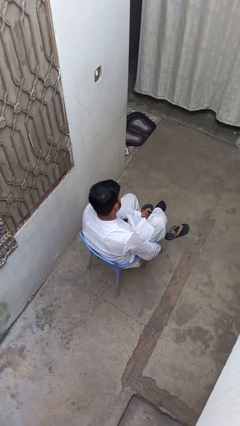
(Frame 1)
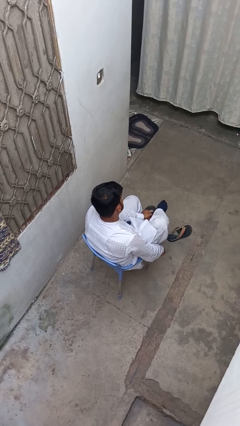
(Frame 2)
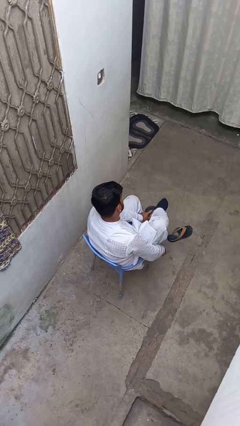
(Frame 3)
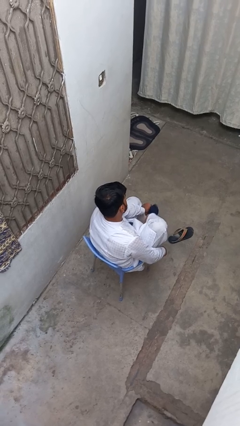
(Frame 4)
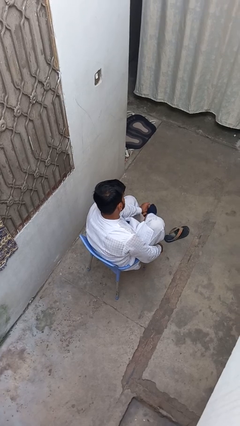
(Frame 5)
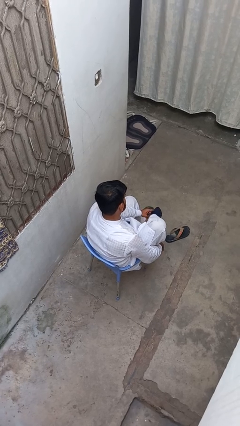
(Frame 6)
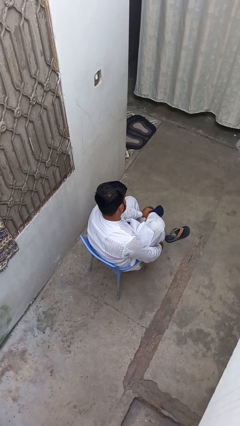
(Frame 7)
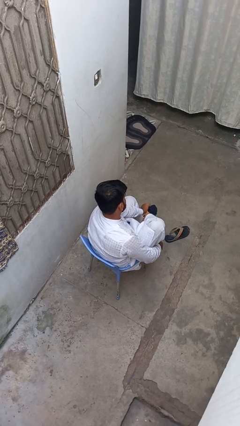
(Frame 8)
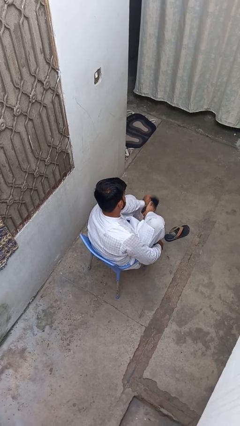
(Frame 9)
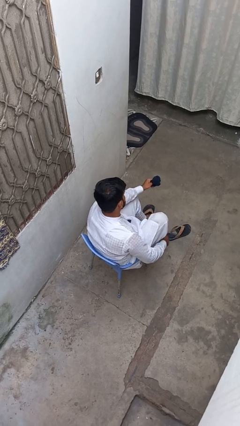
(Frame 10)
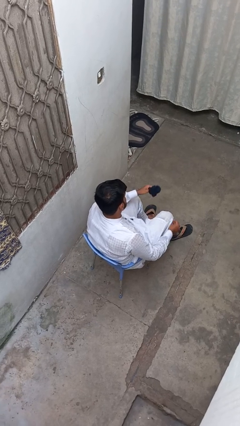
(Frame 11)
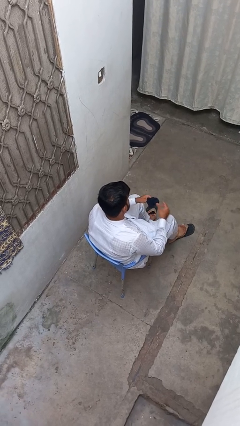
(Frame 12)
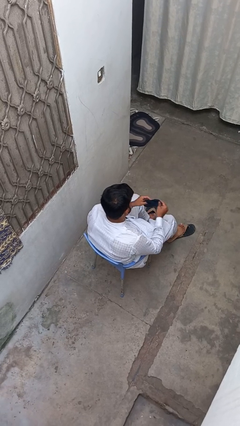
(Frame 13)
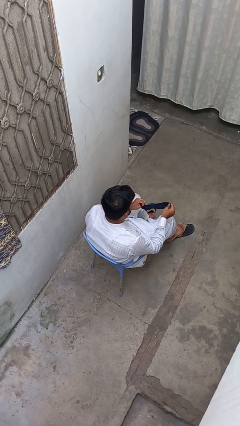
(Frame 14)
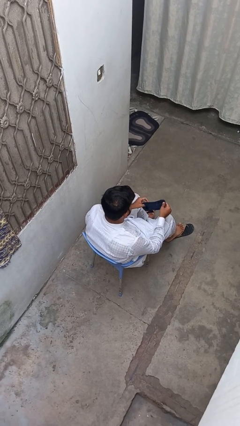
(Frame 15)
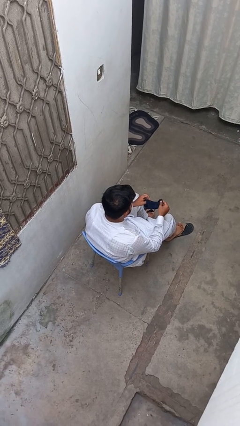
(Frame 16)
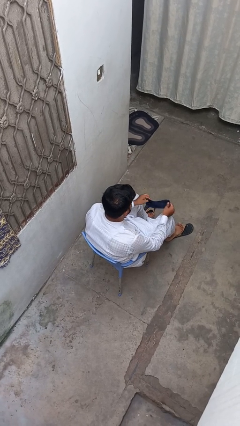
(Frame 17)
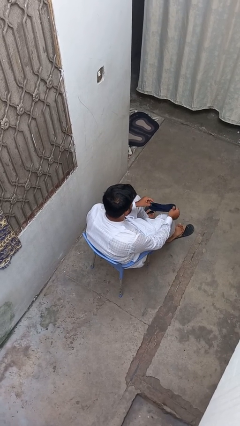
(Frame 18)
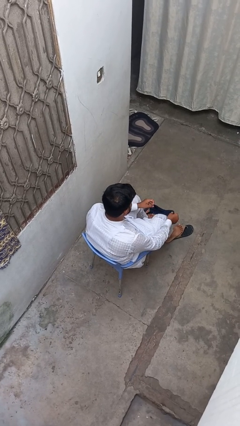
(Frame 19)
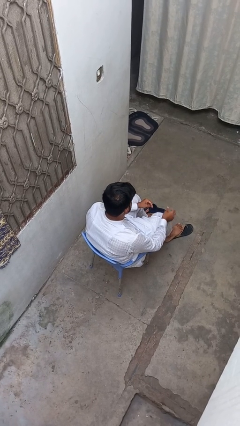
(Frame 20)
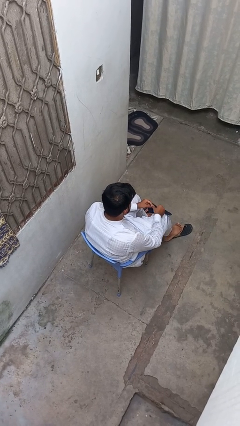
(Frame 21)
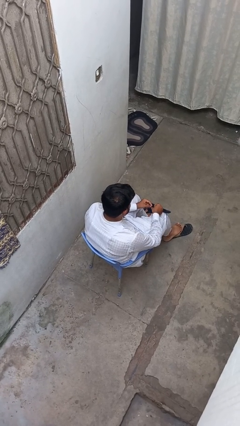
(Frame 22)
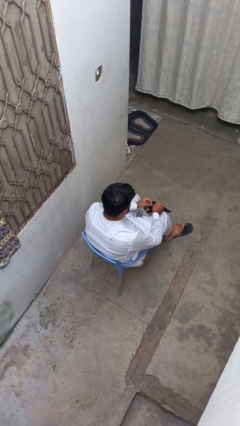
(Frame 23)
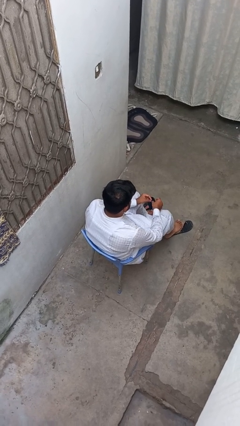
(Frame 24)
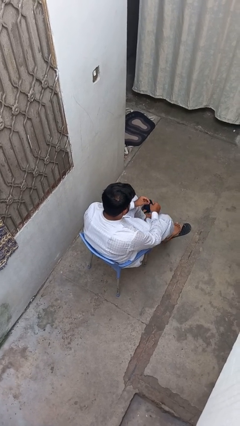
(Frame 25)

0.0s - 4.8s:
person takes off socks

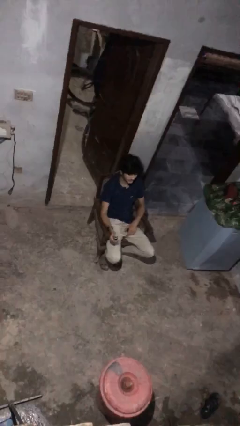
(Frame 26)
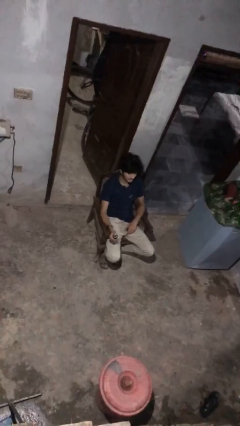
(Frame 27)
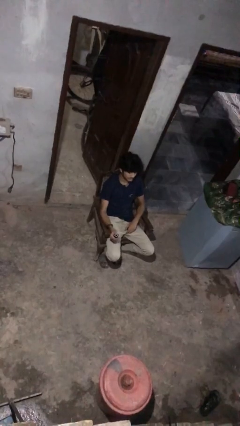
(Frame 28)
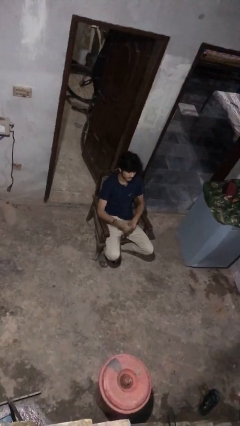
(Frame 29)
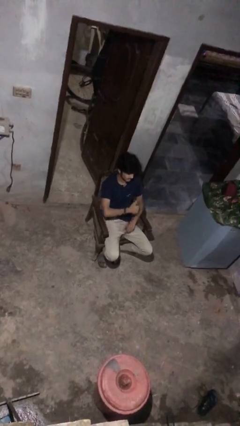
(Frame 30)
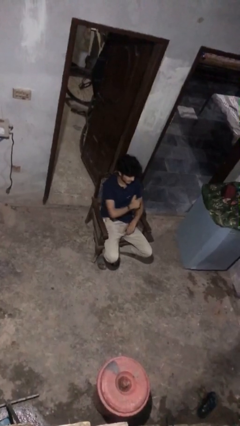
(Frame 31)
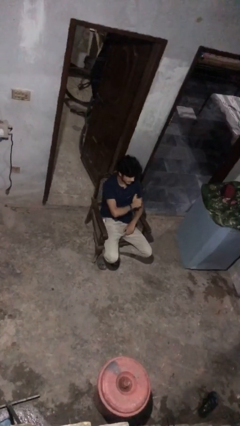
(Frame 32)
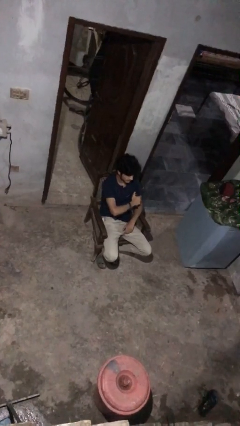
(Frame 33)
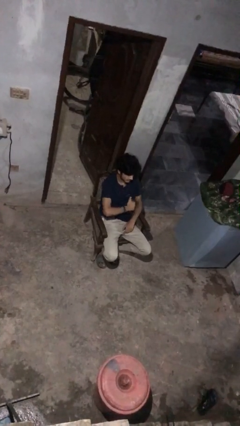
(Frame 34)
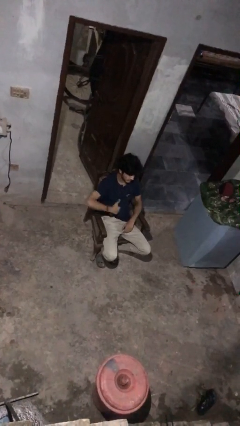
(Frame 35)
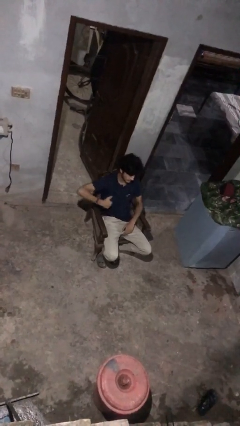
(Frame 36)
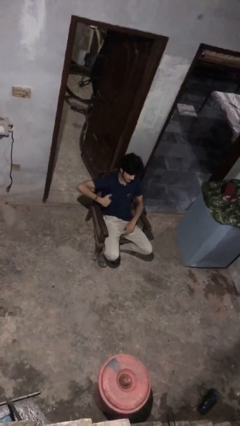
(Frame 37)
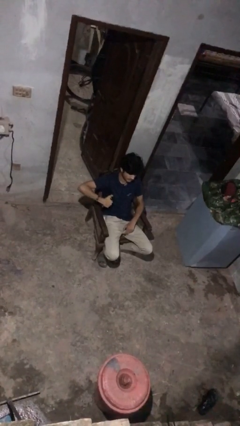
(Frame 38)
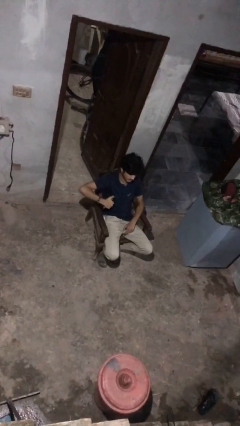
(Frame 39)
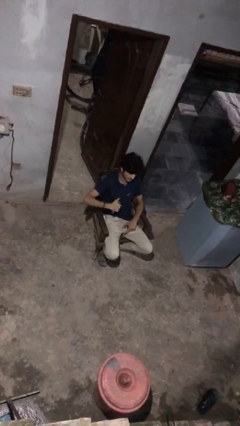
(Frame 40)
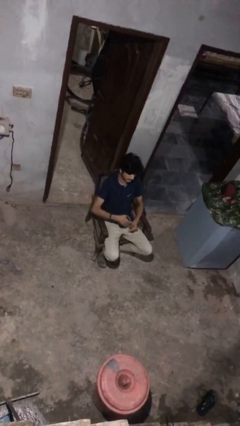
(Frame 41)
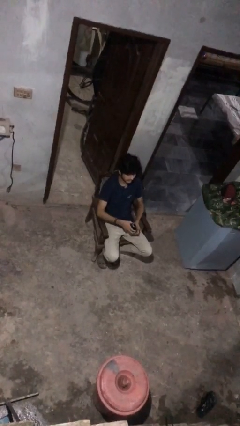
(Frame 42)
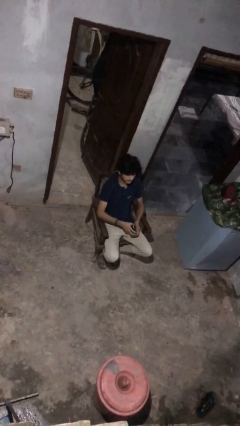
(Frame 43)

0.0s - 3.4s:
person applies deodorant

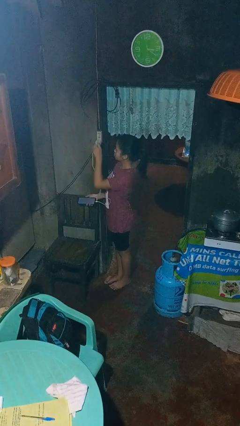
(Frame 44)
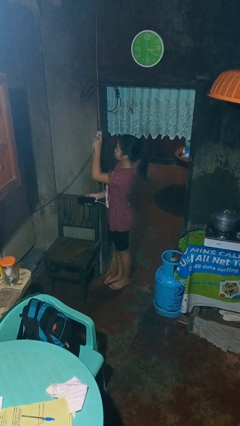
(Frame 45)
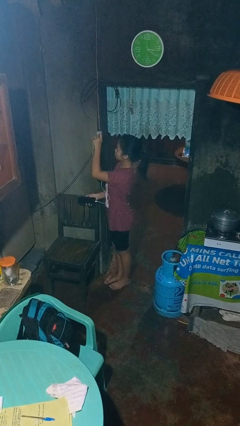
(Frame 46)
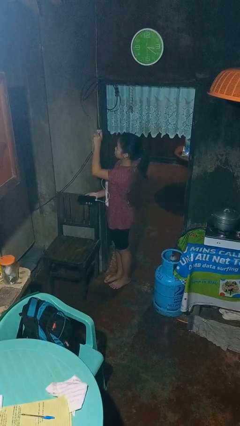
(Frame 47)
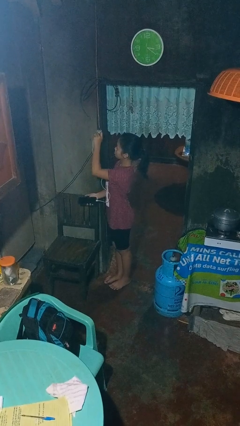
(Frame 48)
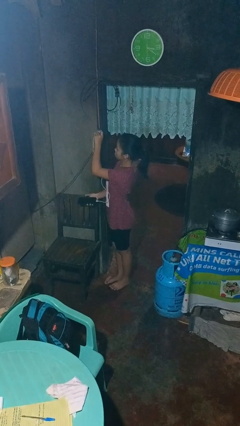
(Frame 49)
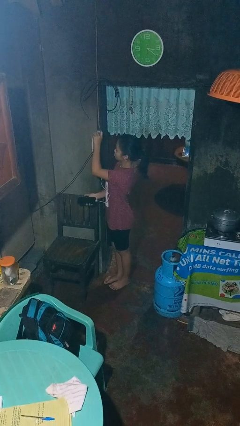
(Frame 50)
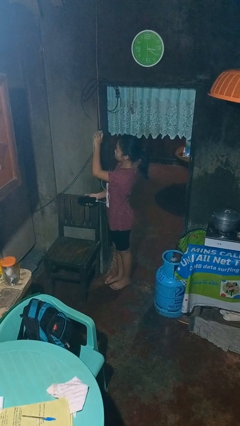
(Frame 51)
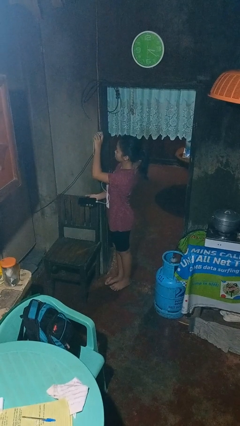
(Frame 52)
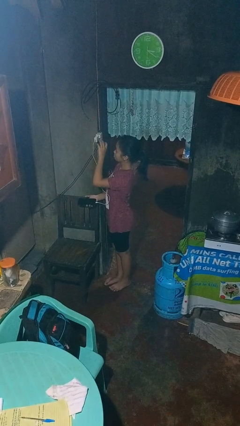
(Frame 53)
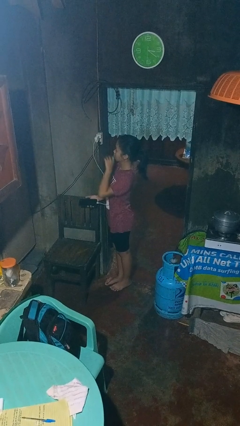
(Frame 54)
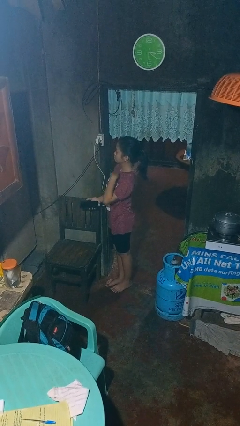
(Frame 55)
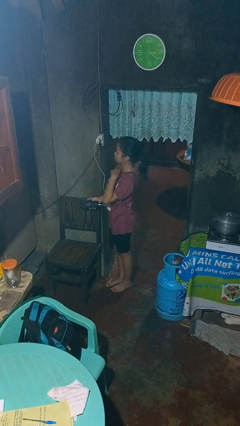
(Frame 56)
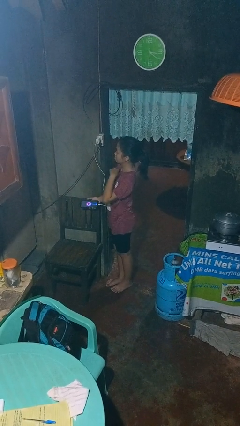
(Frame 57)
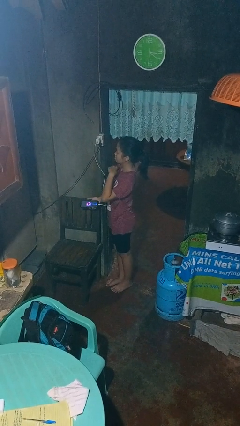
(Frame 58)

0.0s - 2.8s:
person plugs into electrical socket

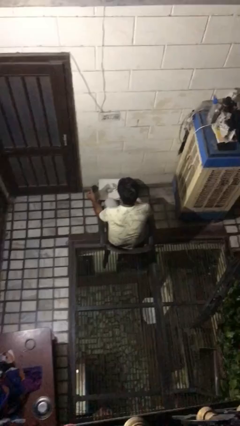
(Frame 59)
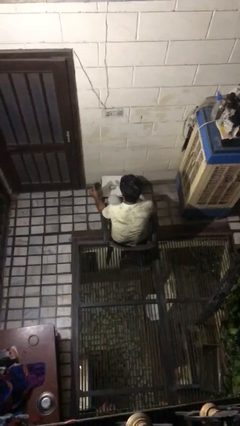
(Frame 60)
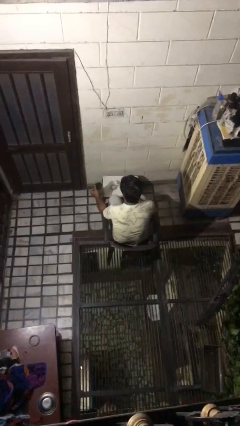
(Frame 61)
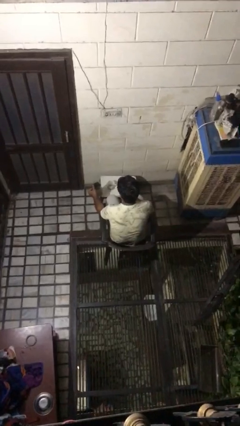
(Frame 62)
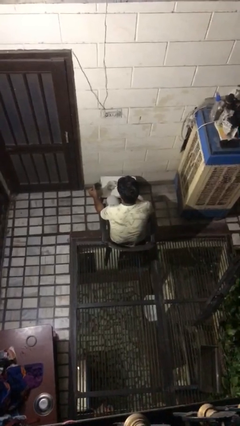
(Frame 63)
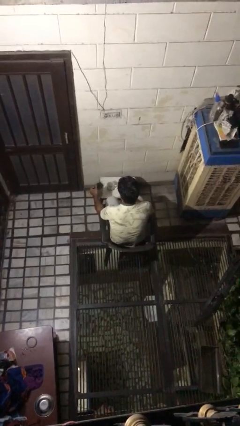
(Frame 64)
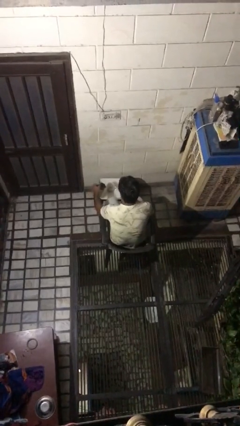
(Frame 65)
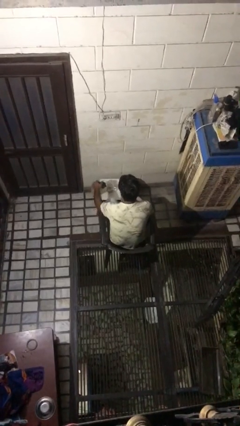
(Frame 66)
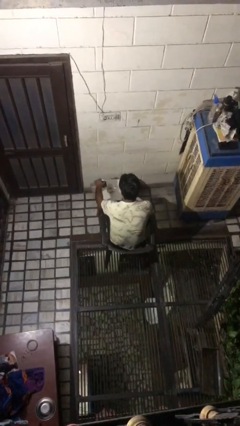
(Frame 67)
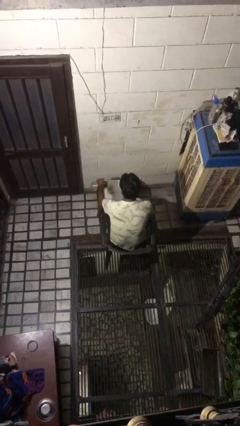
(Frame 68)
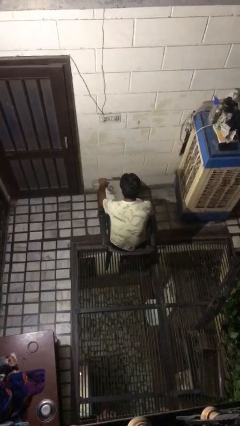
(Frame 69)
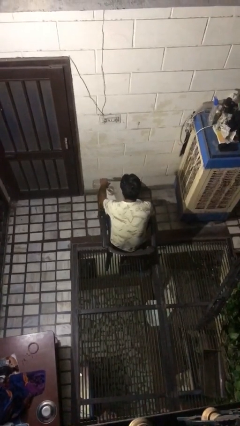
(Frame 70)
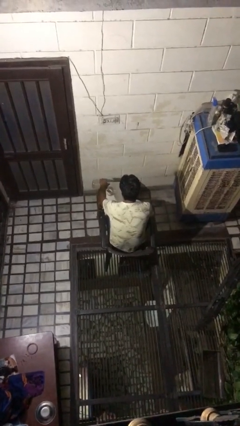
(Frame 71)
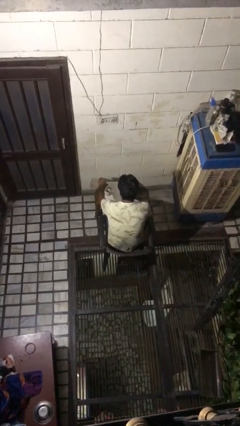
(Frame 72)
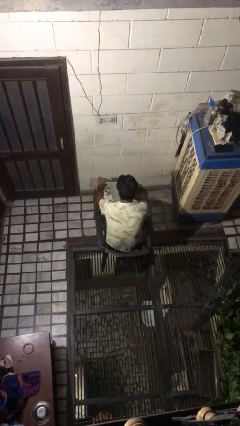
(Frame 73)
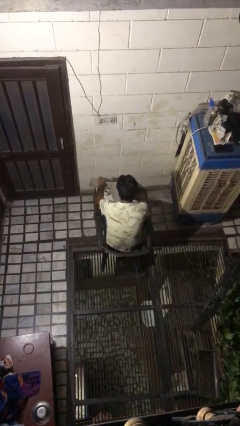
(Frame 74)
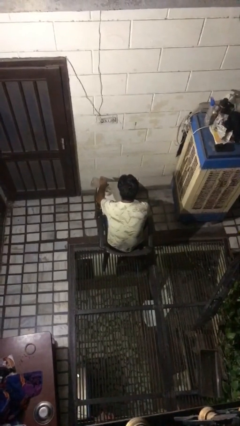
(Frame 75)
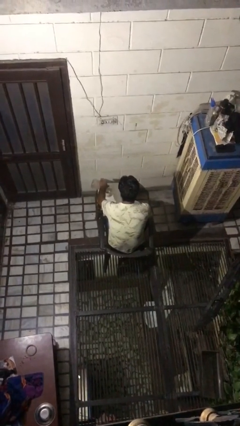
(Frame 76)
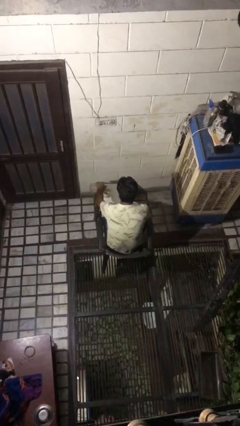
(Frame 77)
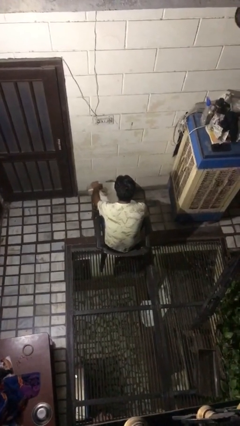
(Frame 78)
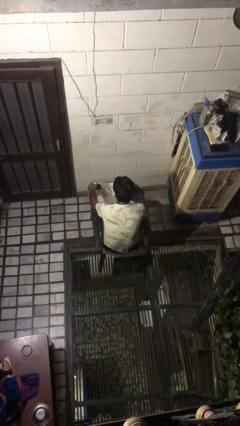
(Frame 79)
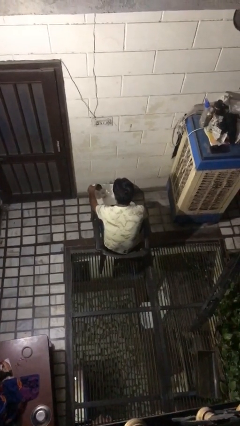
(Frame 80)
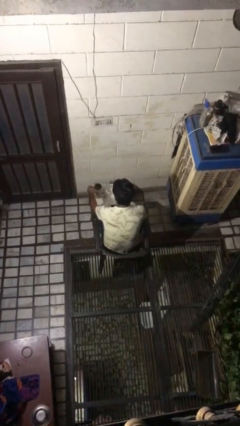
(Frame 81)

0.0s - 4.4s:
person pours coffee into mug

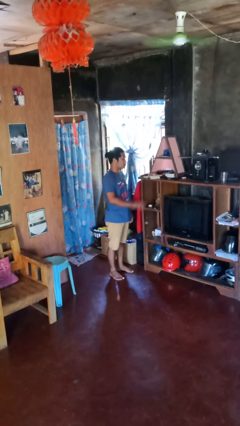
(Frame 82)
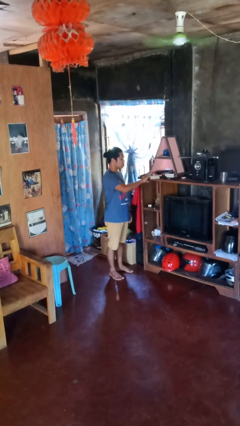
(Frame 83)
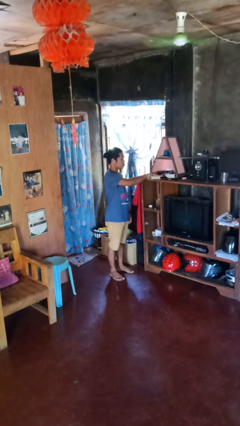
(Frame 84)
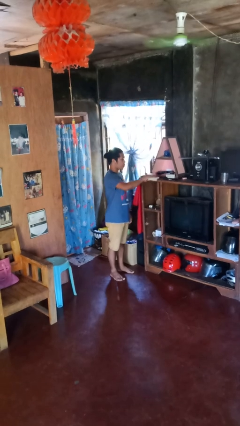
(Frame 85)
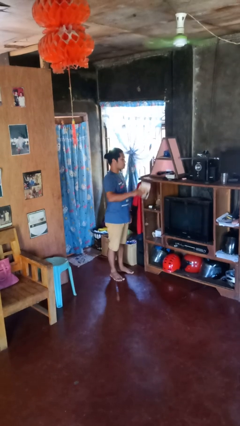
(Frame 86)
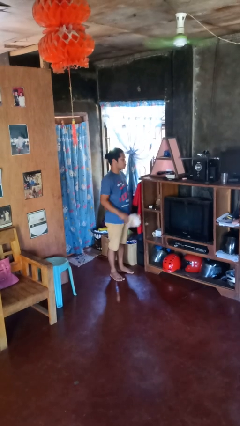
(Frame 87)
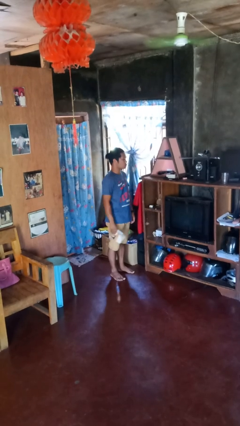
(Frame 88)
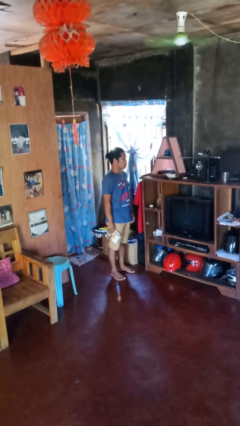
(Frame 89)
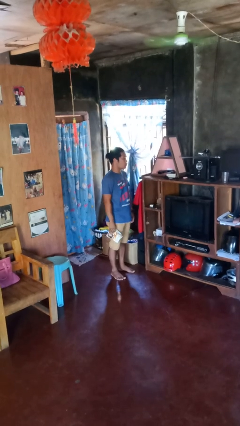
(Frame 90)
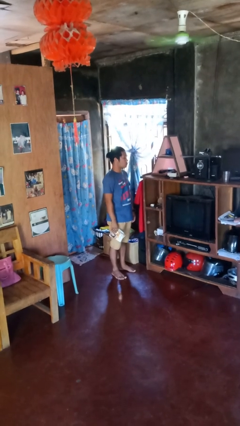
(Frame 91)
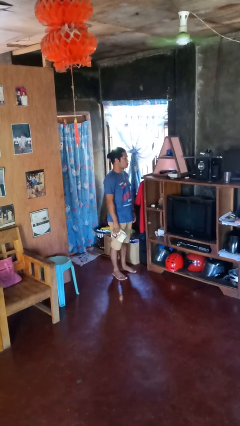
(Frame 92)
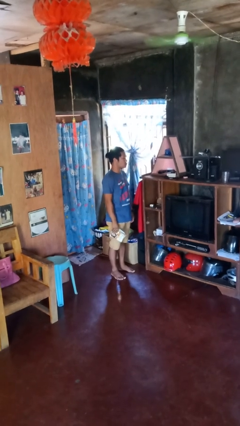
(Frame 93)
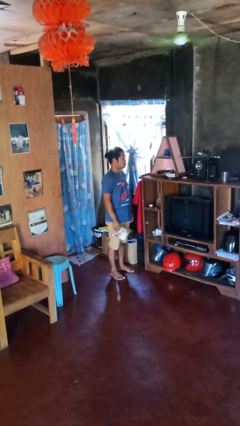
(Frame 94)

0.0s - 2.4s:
person picks up object from shelf

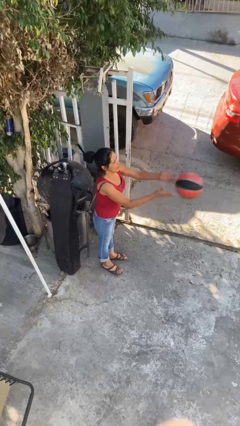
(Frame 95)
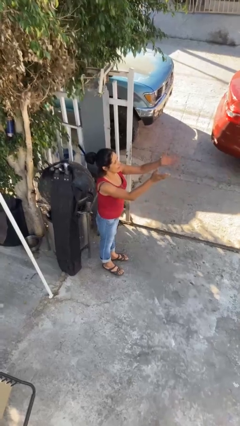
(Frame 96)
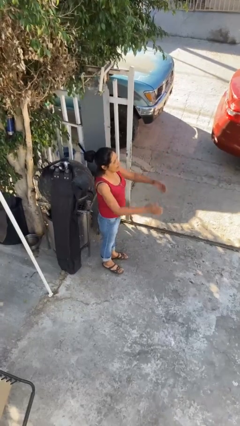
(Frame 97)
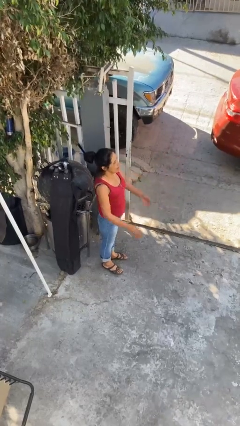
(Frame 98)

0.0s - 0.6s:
person throws object to person
